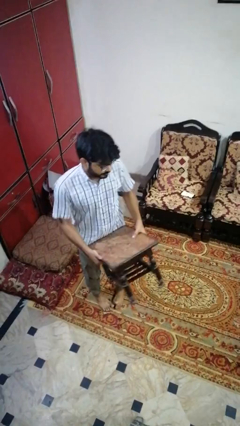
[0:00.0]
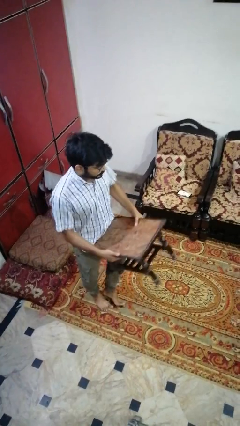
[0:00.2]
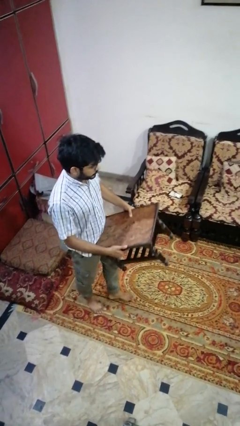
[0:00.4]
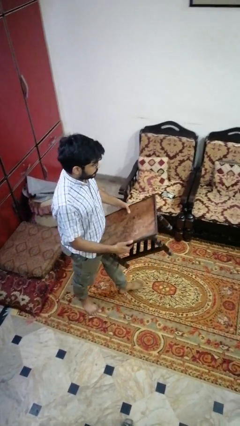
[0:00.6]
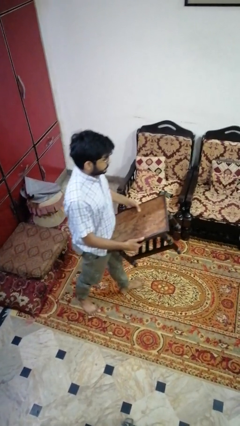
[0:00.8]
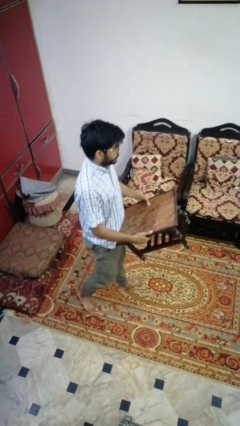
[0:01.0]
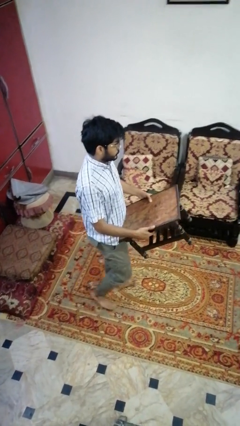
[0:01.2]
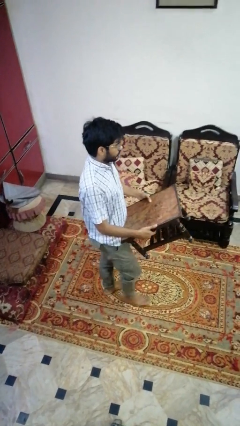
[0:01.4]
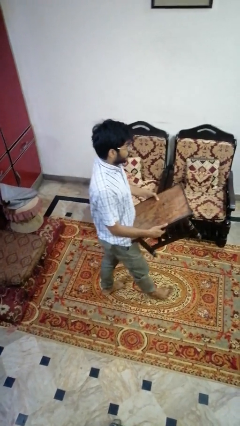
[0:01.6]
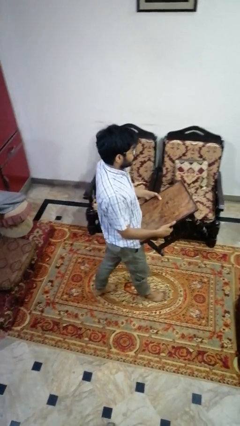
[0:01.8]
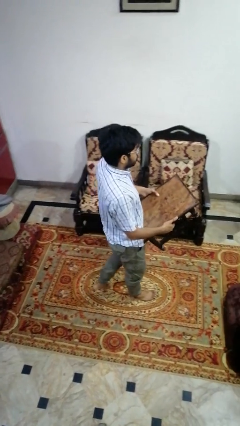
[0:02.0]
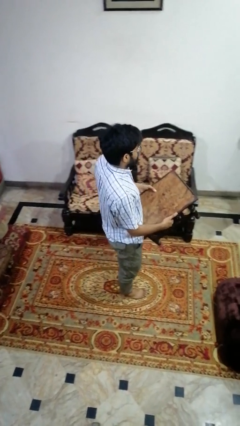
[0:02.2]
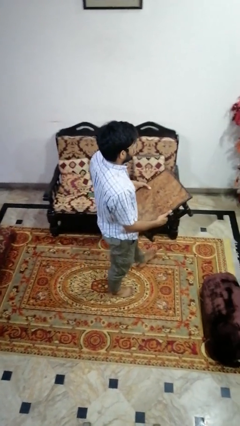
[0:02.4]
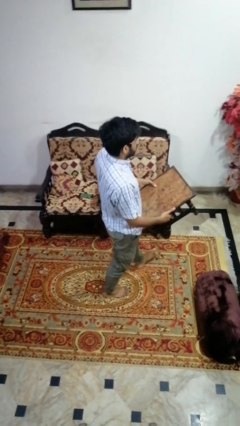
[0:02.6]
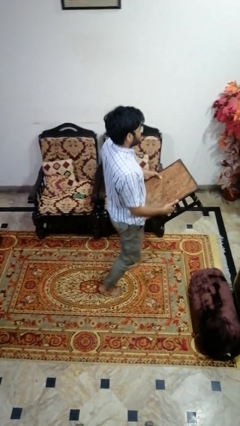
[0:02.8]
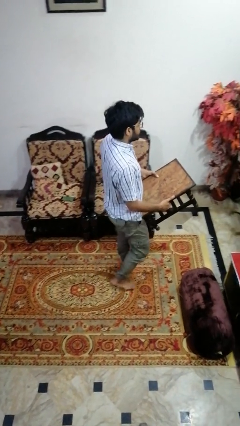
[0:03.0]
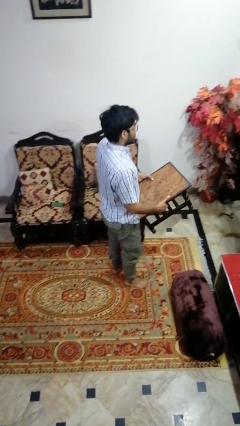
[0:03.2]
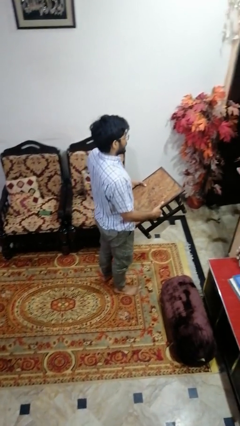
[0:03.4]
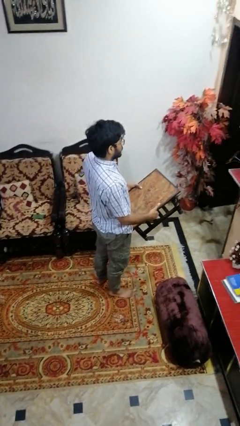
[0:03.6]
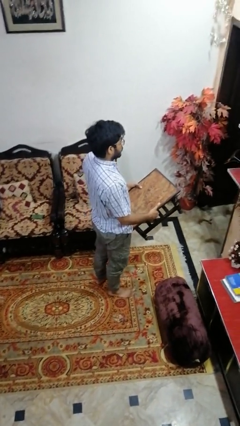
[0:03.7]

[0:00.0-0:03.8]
person carries furniture

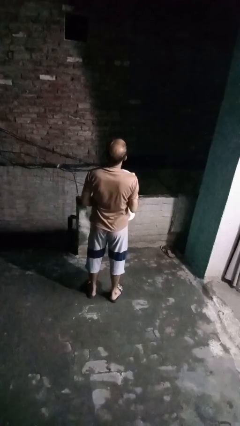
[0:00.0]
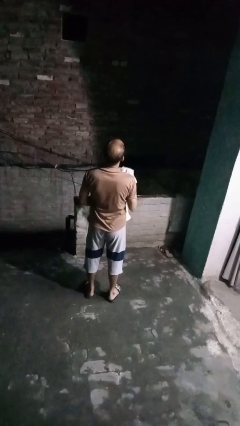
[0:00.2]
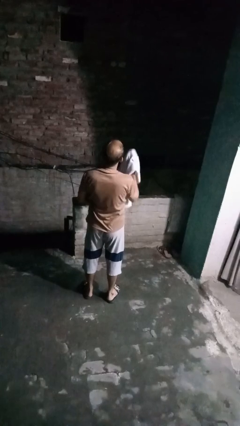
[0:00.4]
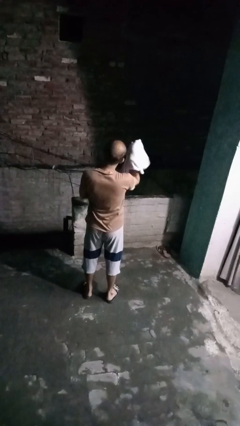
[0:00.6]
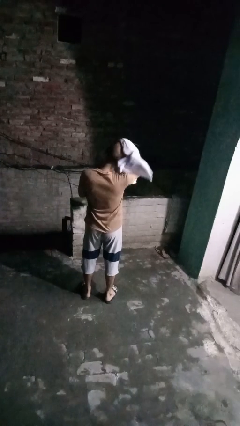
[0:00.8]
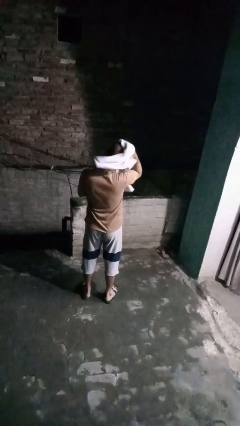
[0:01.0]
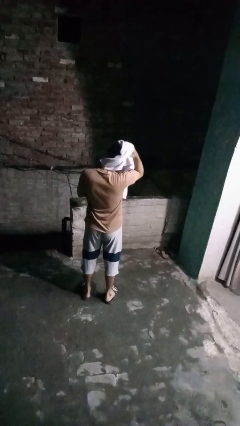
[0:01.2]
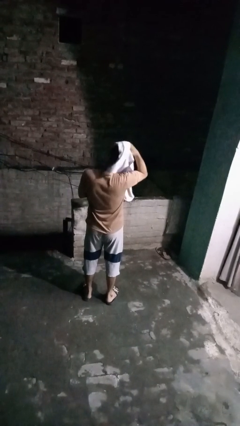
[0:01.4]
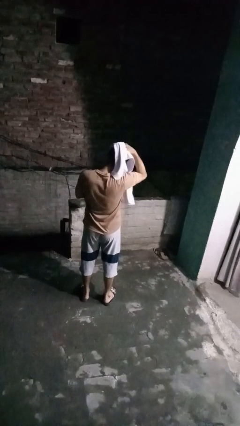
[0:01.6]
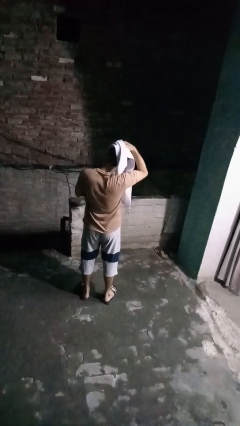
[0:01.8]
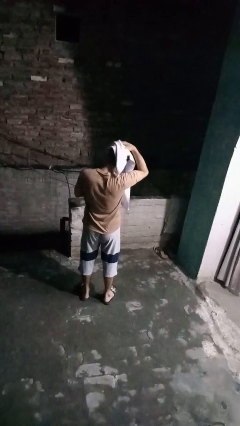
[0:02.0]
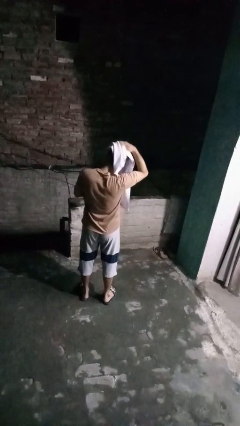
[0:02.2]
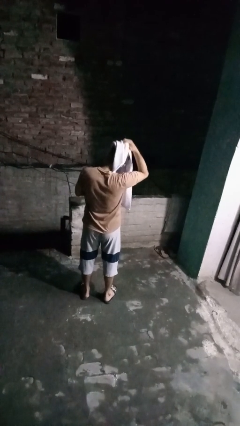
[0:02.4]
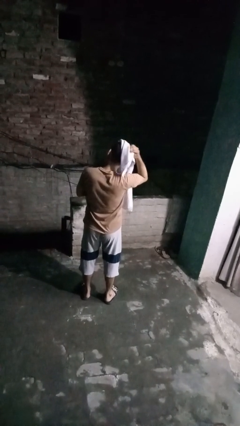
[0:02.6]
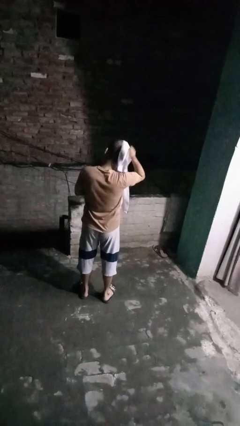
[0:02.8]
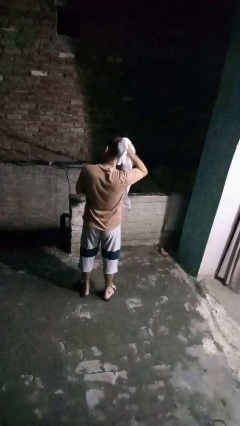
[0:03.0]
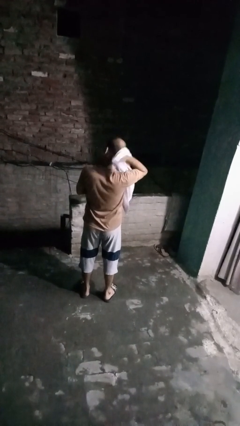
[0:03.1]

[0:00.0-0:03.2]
person dries hair with towel

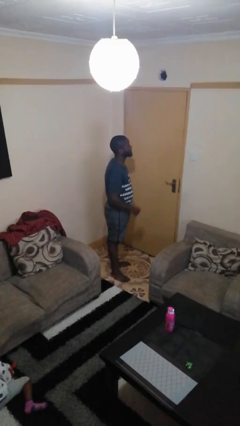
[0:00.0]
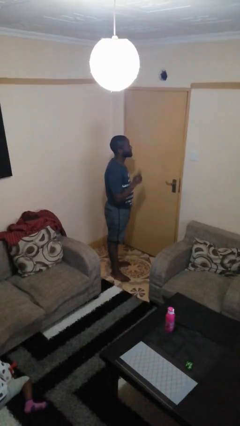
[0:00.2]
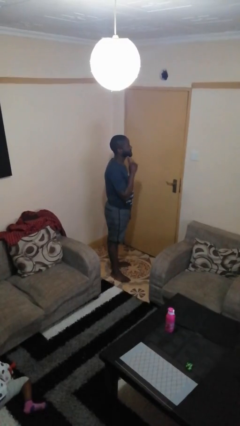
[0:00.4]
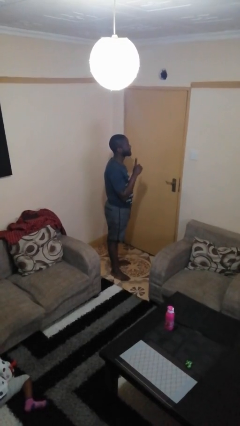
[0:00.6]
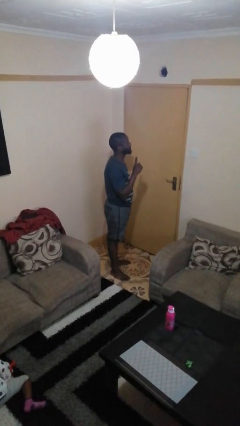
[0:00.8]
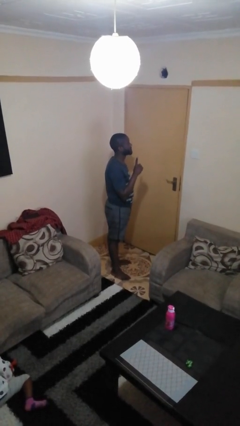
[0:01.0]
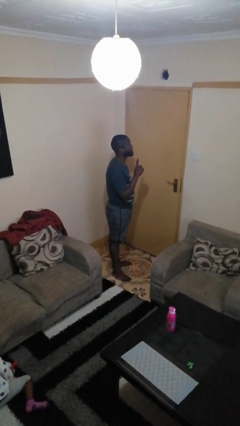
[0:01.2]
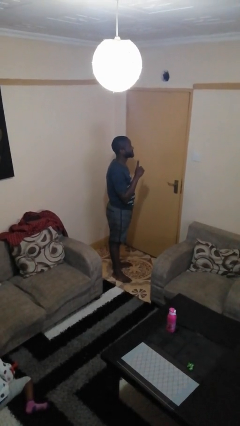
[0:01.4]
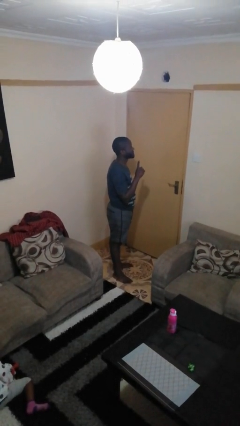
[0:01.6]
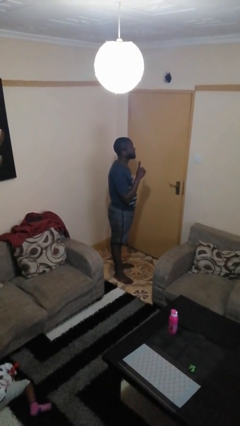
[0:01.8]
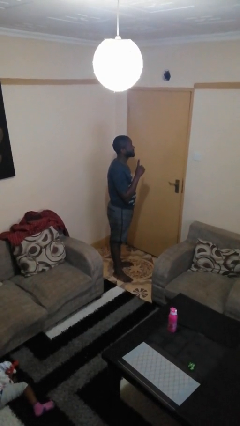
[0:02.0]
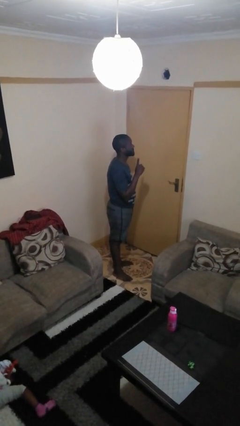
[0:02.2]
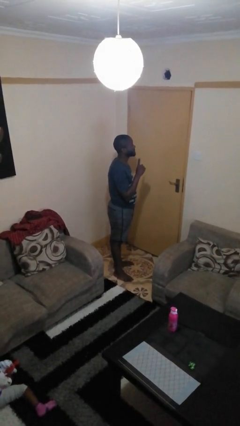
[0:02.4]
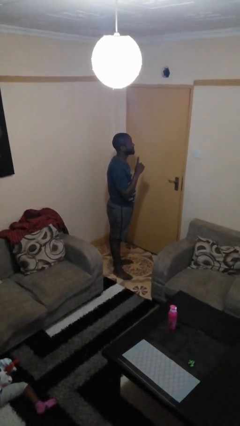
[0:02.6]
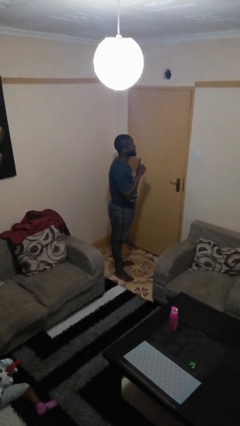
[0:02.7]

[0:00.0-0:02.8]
person gestures number one

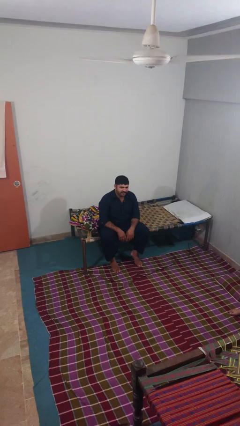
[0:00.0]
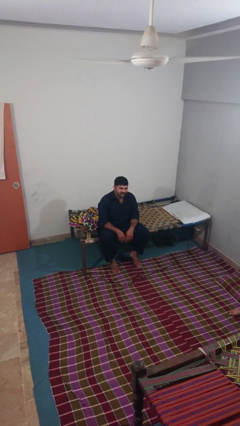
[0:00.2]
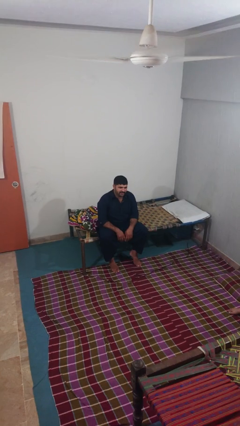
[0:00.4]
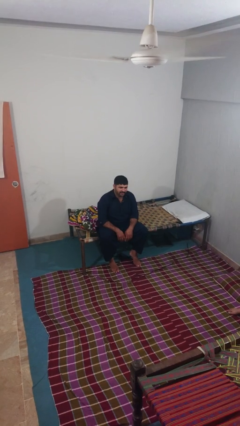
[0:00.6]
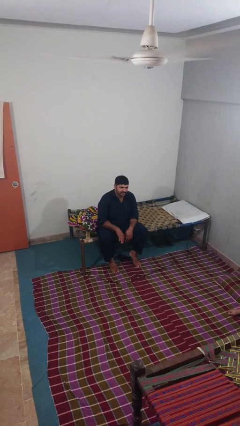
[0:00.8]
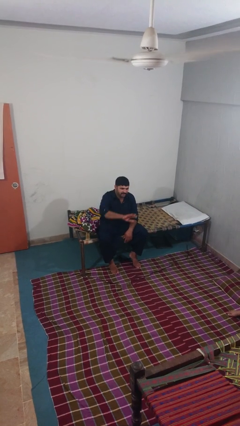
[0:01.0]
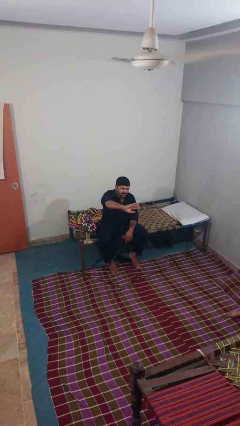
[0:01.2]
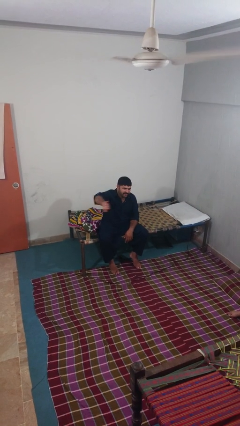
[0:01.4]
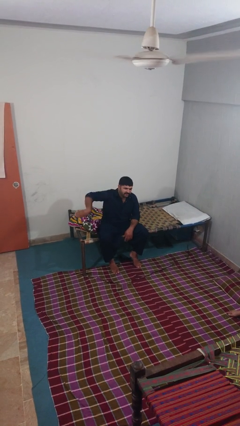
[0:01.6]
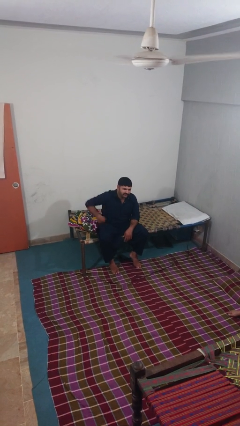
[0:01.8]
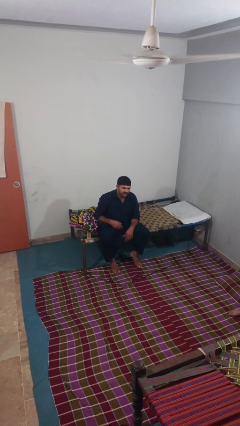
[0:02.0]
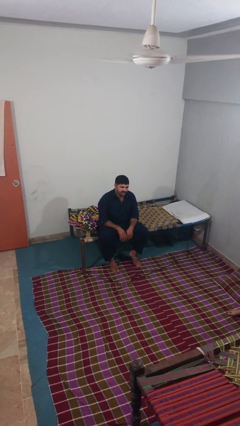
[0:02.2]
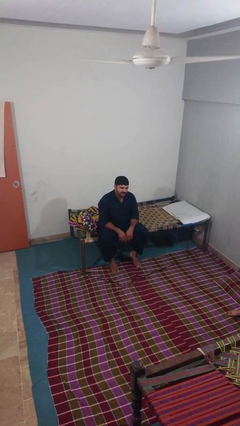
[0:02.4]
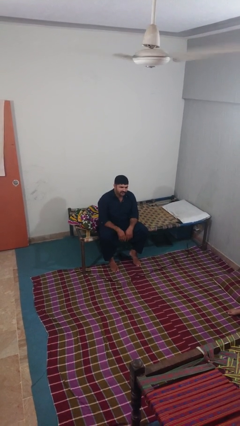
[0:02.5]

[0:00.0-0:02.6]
person gestures swipe right

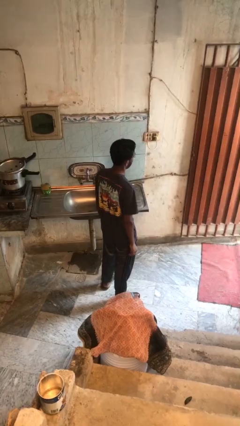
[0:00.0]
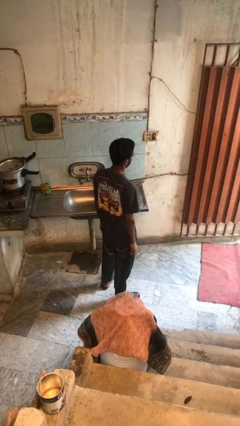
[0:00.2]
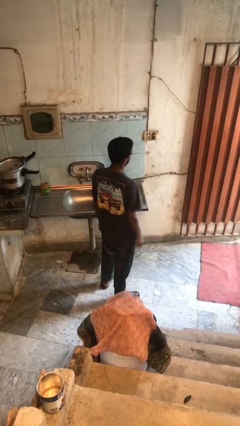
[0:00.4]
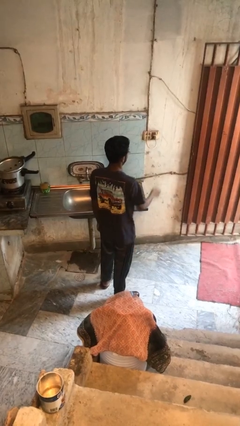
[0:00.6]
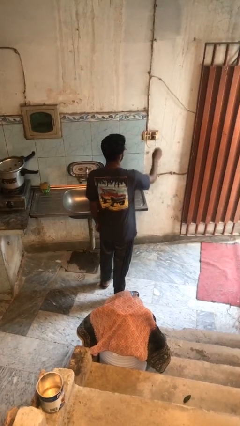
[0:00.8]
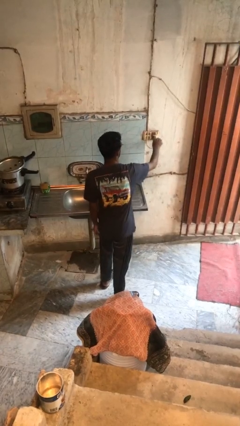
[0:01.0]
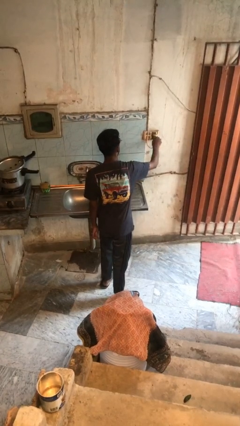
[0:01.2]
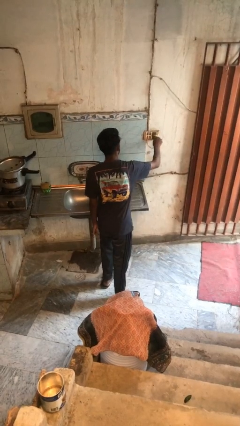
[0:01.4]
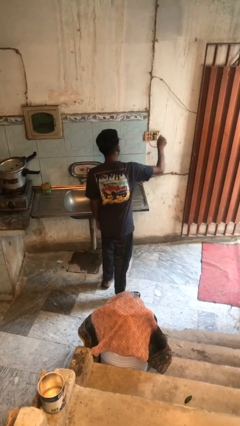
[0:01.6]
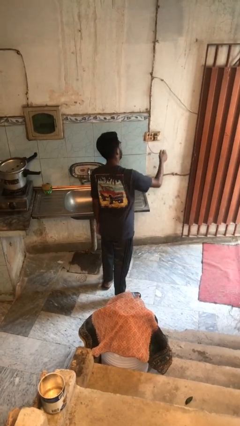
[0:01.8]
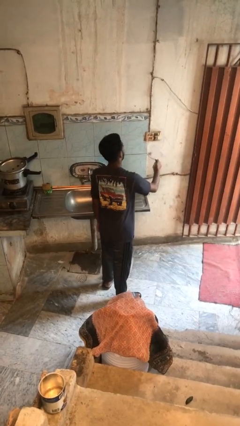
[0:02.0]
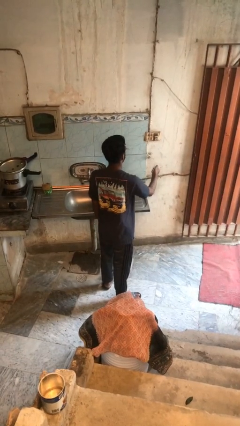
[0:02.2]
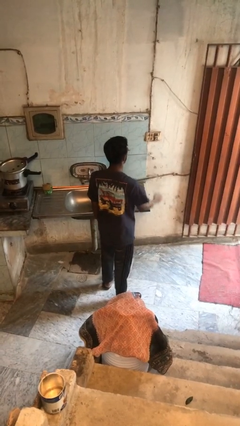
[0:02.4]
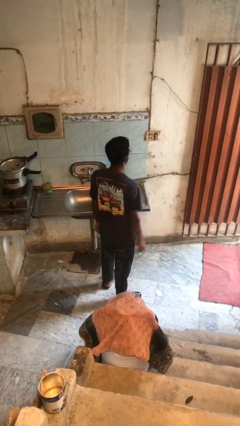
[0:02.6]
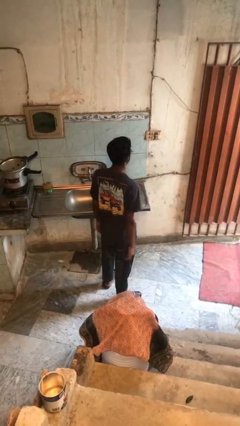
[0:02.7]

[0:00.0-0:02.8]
person unplugs from electrical socket

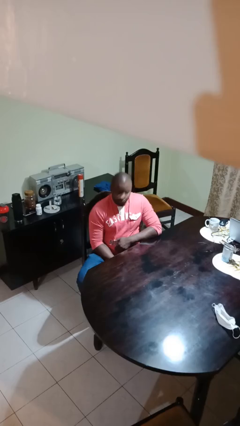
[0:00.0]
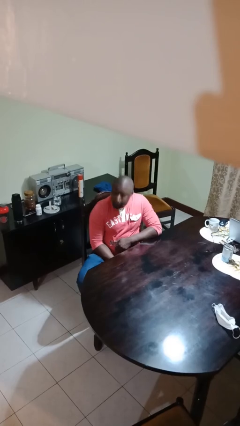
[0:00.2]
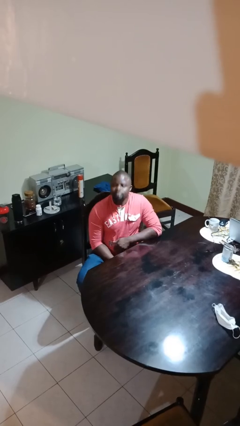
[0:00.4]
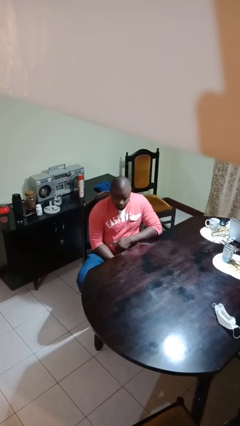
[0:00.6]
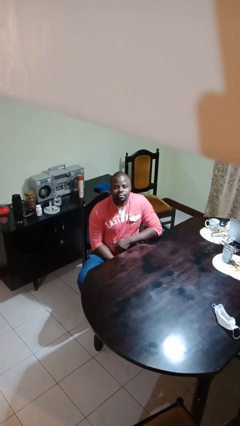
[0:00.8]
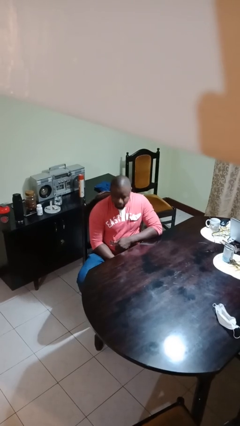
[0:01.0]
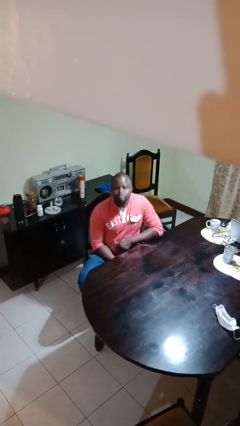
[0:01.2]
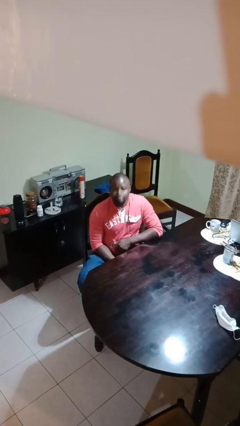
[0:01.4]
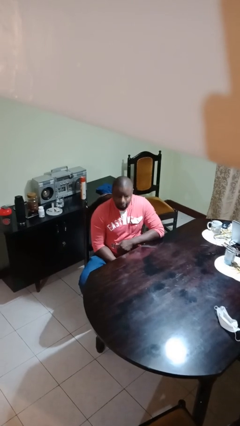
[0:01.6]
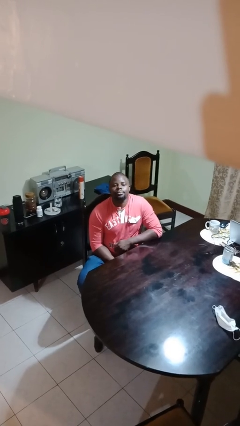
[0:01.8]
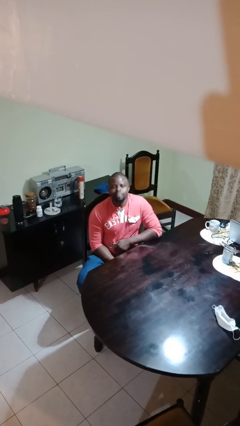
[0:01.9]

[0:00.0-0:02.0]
person nods head

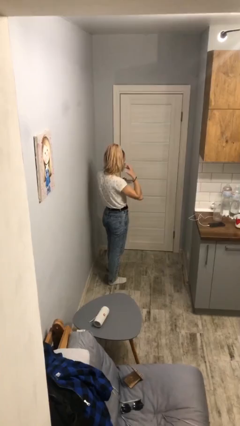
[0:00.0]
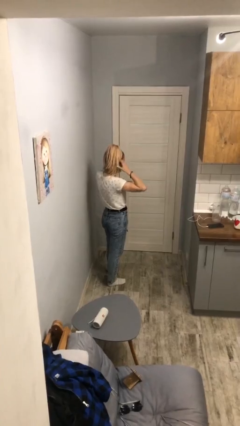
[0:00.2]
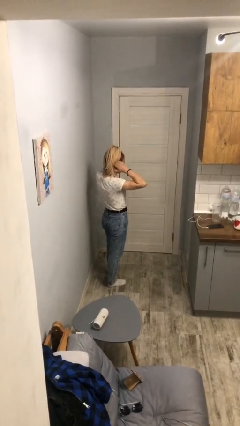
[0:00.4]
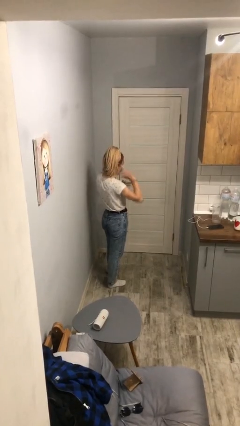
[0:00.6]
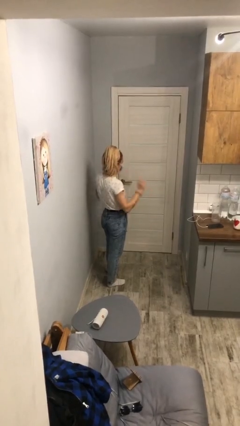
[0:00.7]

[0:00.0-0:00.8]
person puts on facemask
